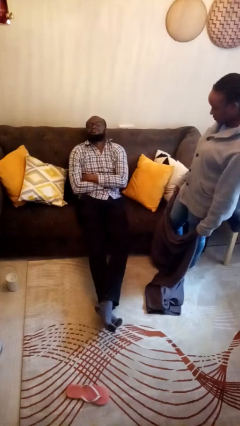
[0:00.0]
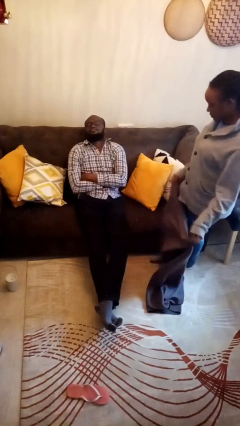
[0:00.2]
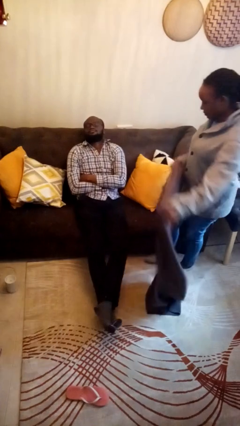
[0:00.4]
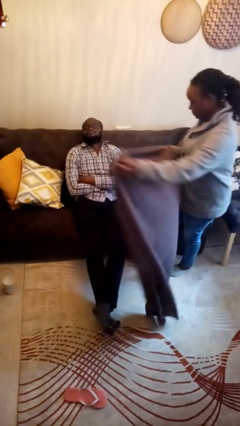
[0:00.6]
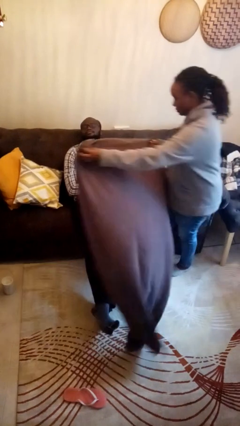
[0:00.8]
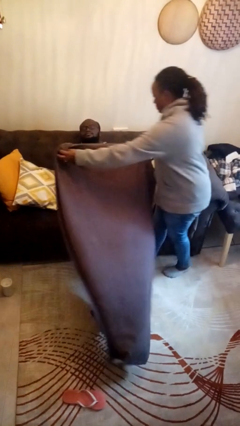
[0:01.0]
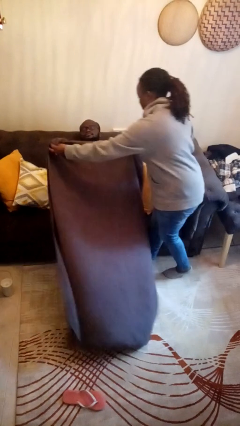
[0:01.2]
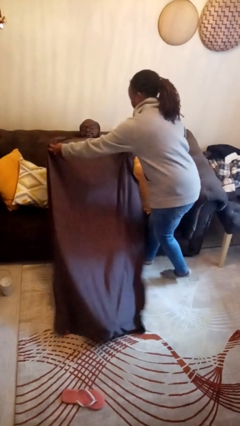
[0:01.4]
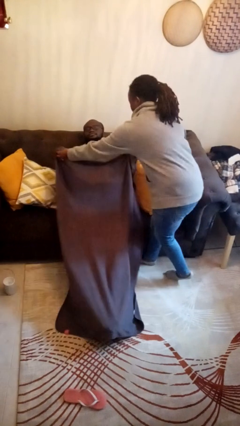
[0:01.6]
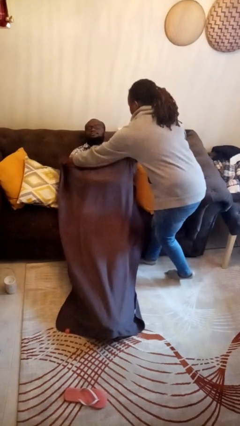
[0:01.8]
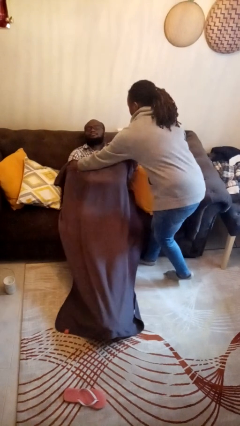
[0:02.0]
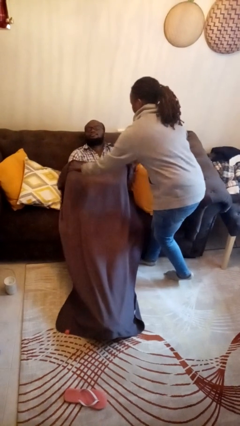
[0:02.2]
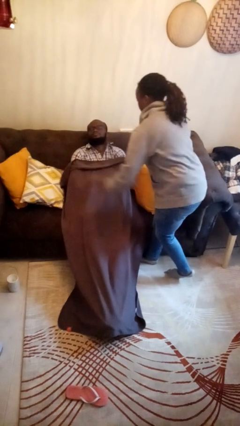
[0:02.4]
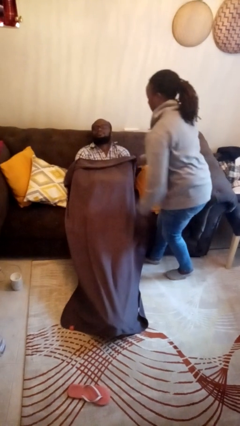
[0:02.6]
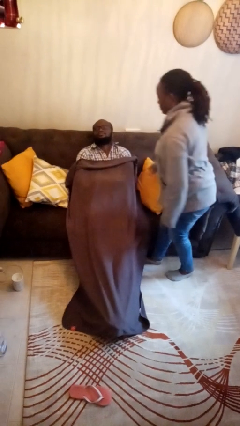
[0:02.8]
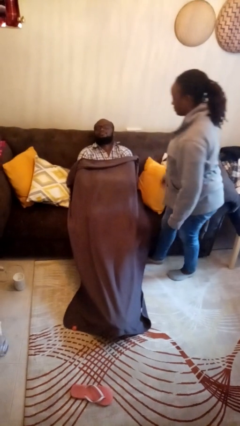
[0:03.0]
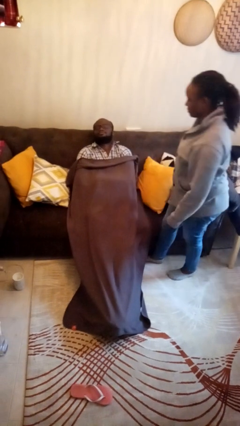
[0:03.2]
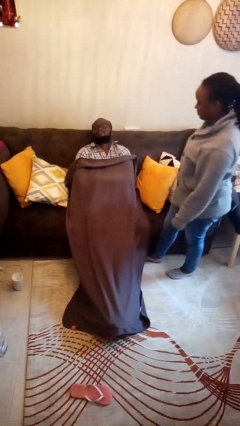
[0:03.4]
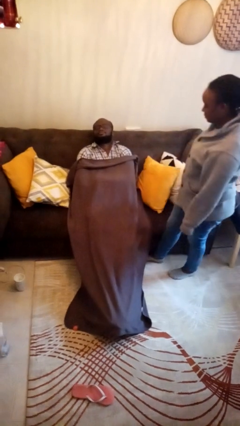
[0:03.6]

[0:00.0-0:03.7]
person covers friend with blanket

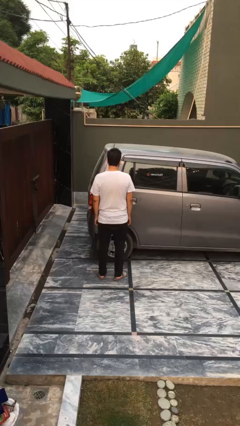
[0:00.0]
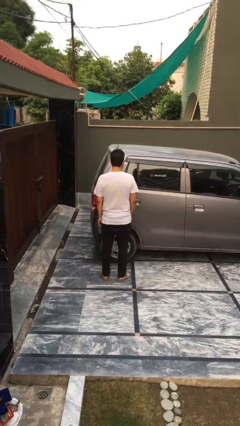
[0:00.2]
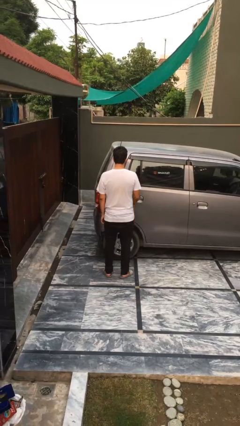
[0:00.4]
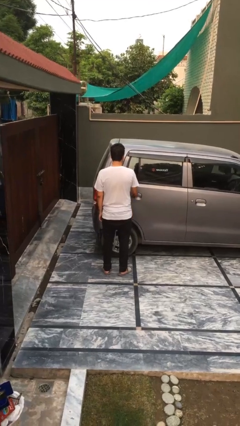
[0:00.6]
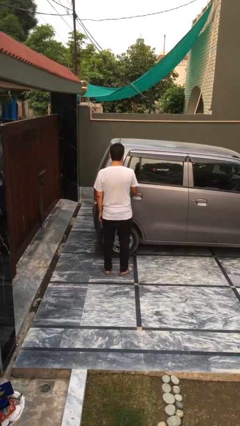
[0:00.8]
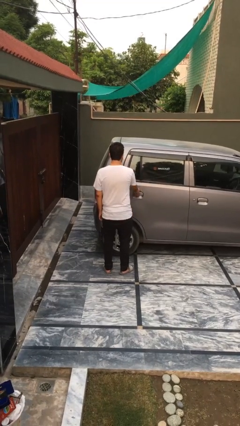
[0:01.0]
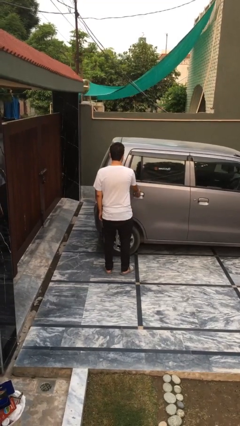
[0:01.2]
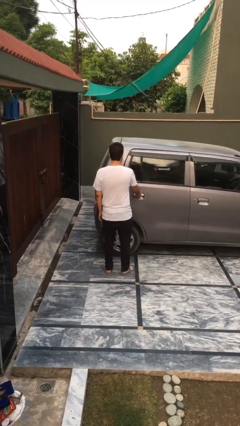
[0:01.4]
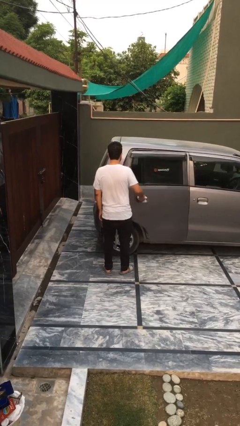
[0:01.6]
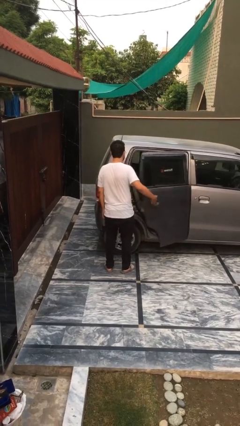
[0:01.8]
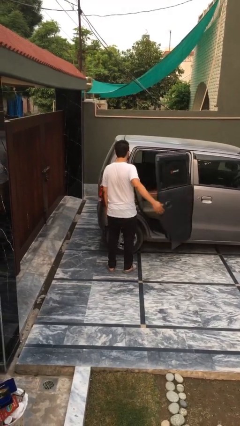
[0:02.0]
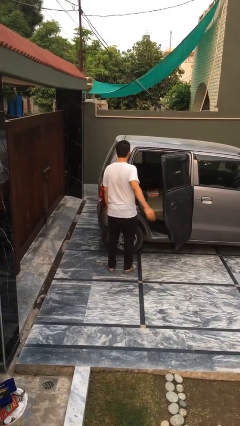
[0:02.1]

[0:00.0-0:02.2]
person opens car door

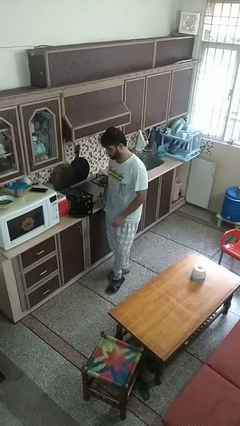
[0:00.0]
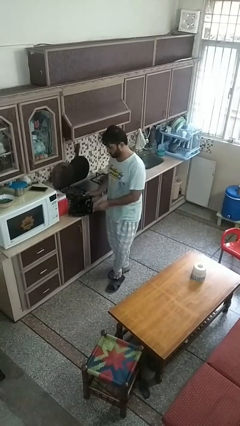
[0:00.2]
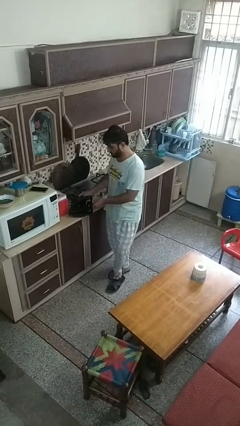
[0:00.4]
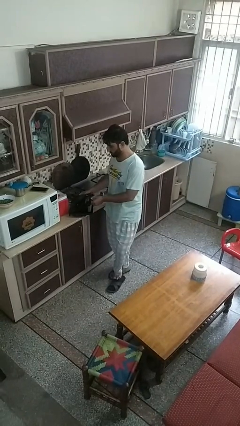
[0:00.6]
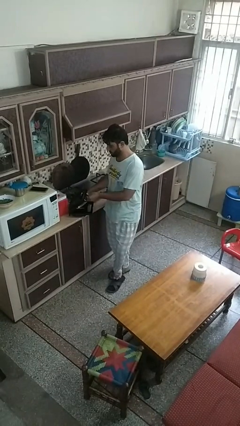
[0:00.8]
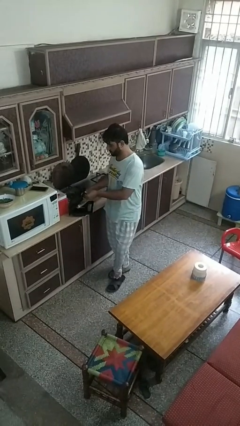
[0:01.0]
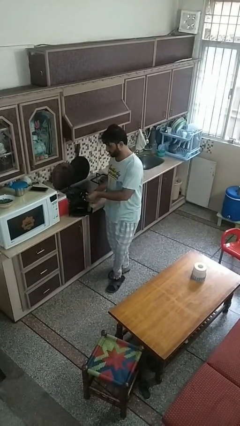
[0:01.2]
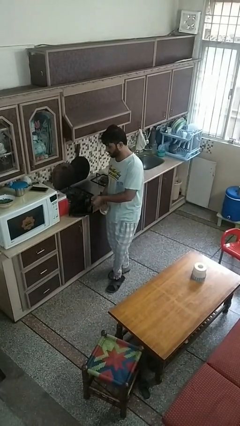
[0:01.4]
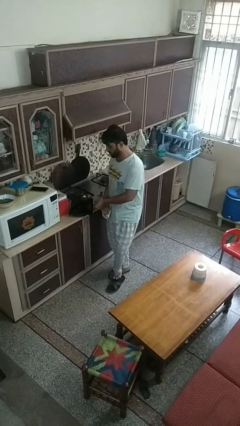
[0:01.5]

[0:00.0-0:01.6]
person takes object from toaster

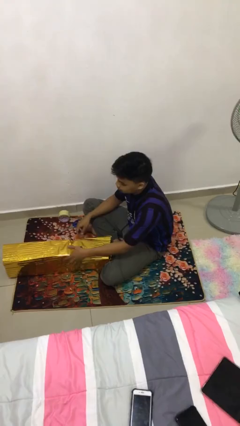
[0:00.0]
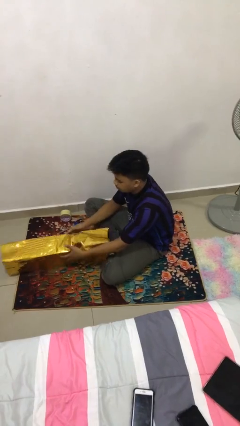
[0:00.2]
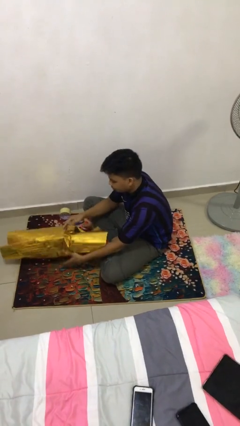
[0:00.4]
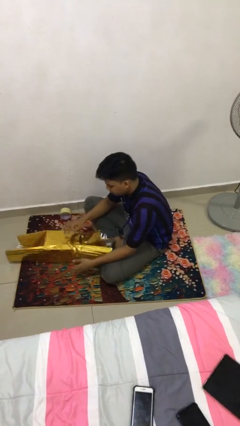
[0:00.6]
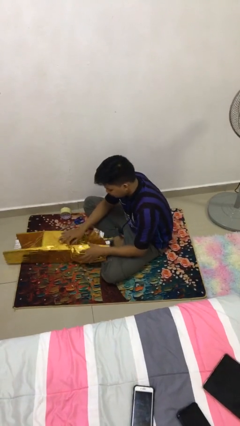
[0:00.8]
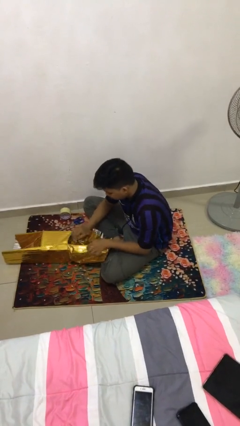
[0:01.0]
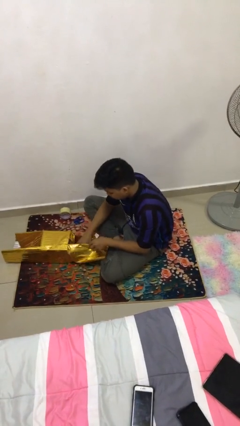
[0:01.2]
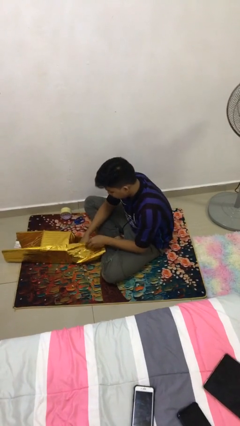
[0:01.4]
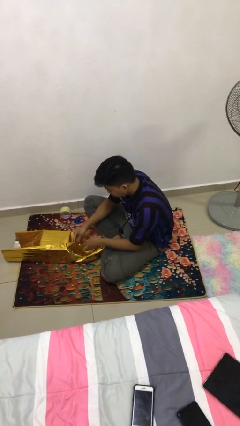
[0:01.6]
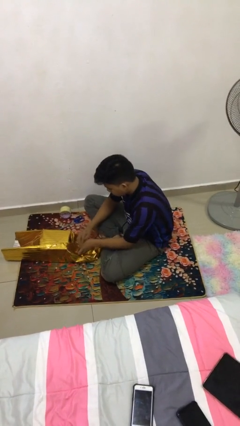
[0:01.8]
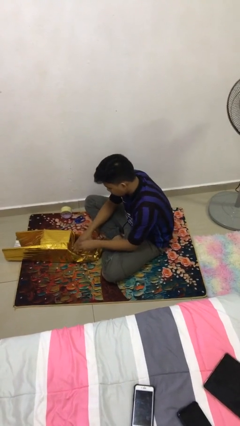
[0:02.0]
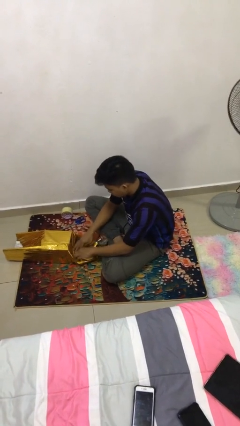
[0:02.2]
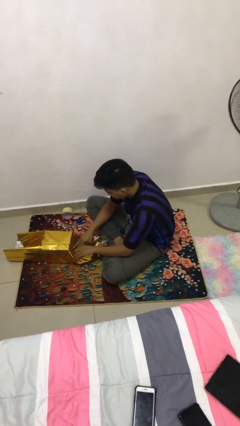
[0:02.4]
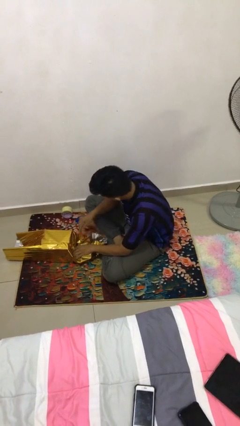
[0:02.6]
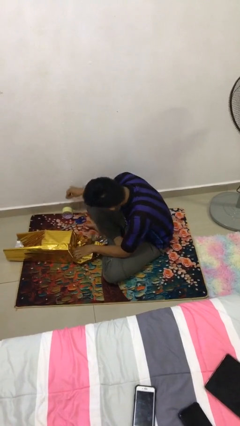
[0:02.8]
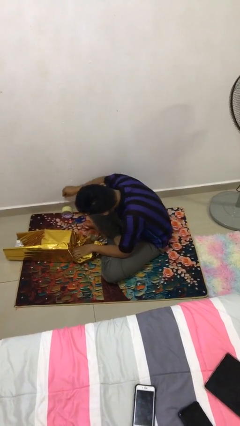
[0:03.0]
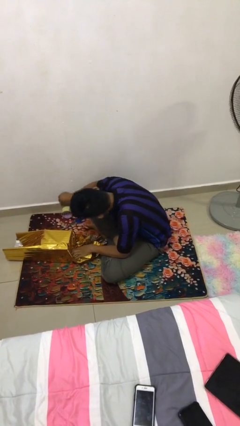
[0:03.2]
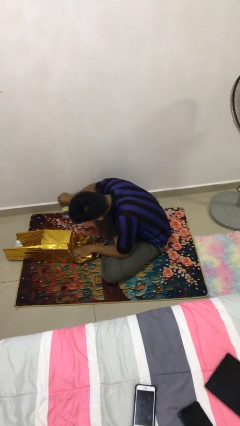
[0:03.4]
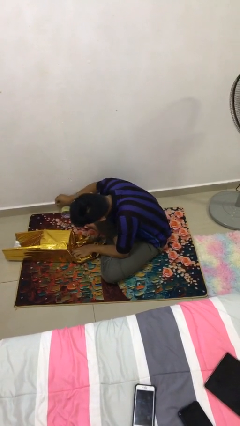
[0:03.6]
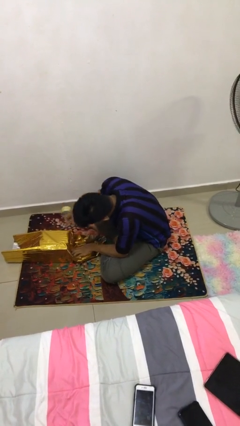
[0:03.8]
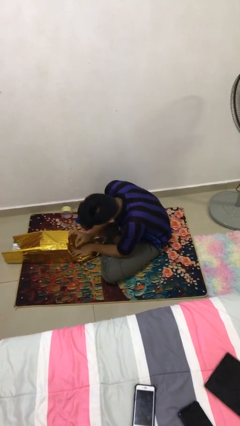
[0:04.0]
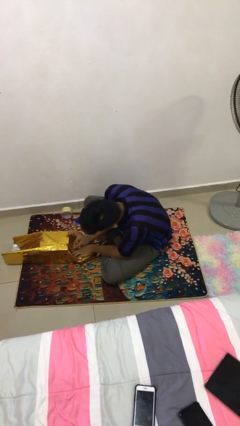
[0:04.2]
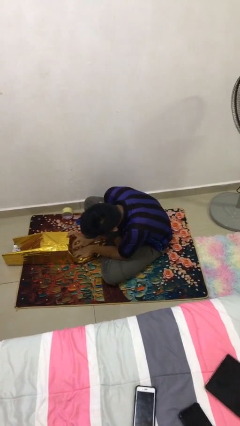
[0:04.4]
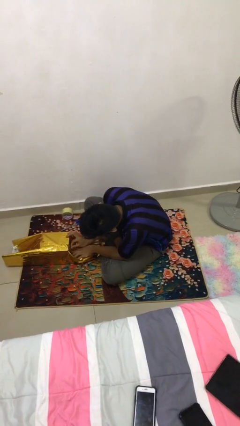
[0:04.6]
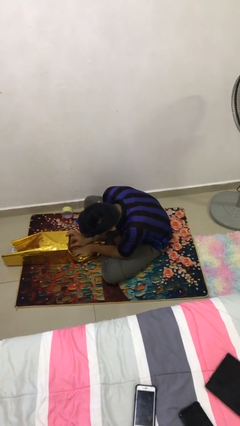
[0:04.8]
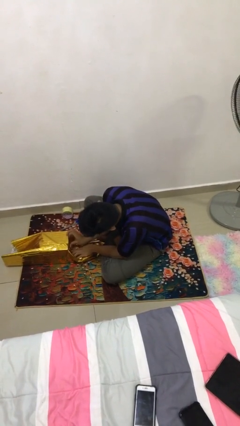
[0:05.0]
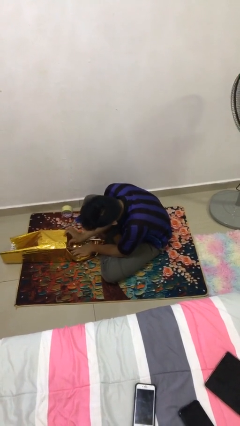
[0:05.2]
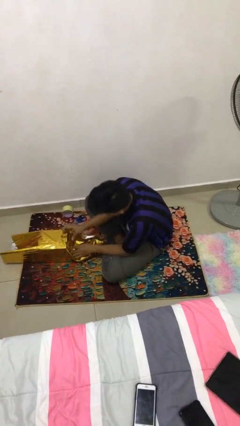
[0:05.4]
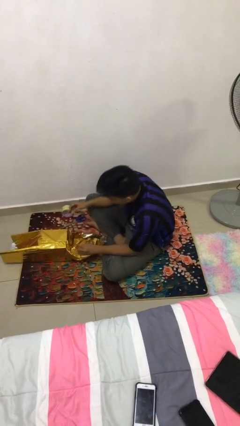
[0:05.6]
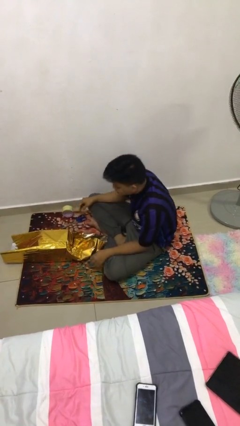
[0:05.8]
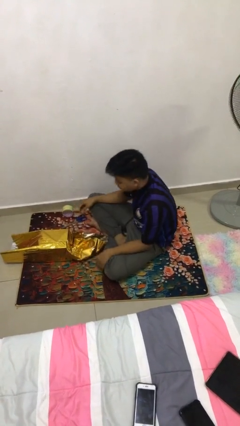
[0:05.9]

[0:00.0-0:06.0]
person wraps box

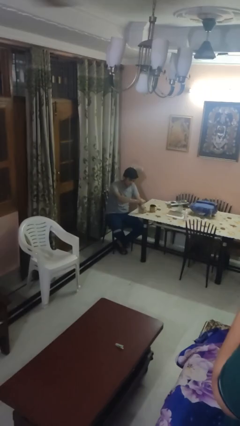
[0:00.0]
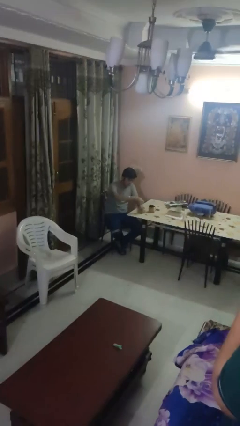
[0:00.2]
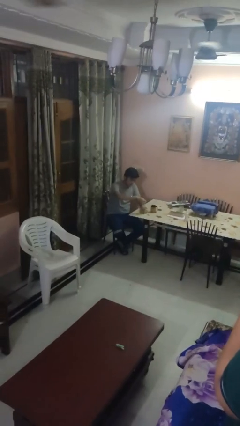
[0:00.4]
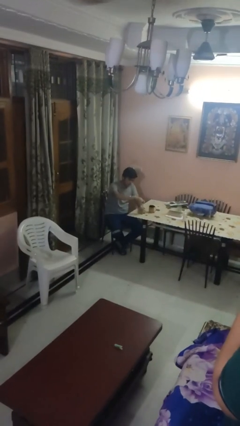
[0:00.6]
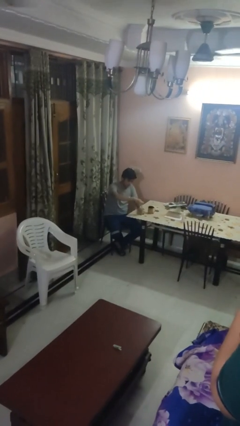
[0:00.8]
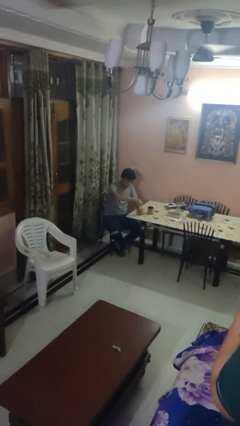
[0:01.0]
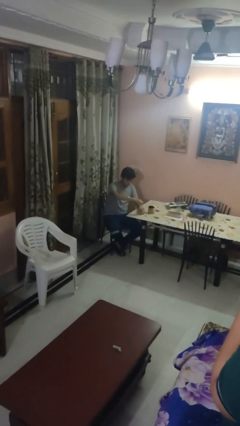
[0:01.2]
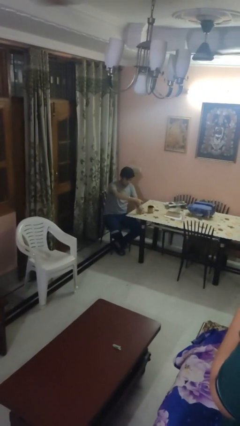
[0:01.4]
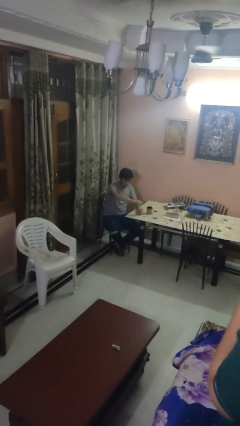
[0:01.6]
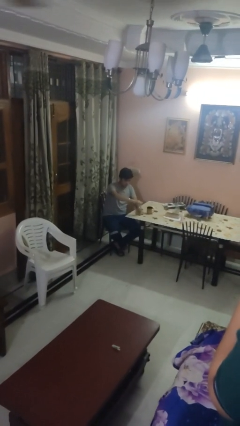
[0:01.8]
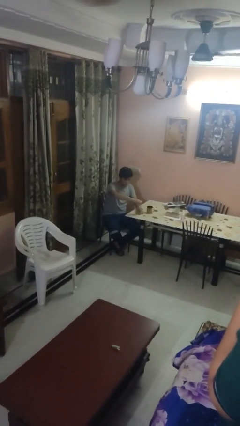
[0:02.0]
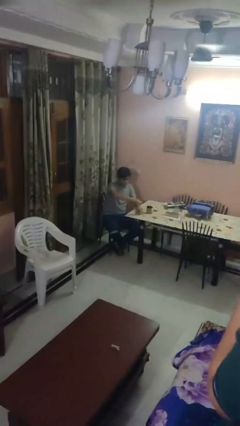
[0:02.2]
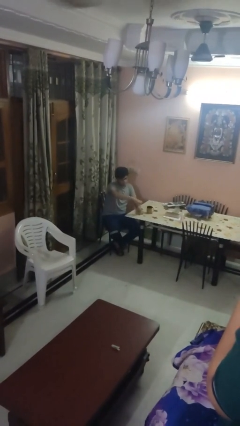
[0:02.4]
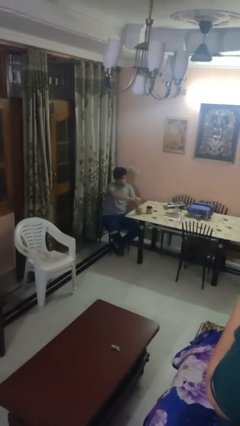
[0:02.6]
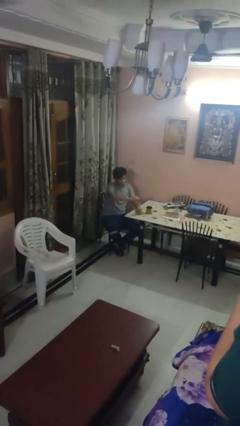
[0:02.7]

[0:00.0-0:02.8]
person unscrews lid from bottle

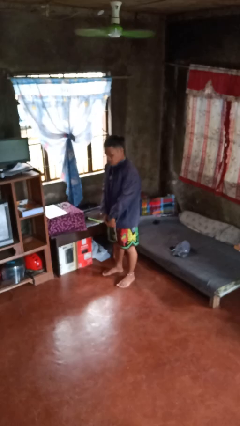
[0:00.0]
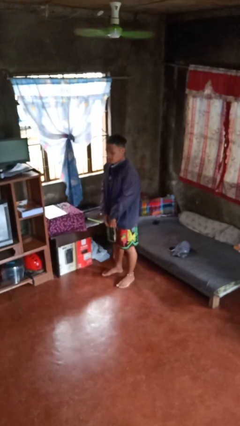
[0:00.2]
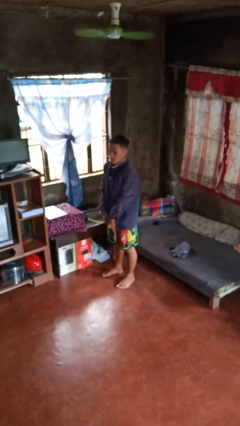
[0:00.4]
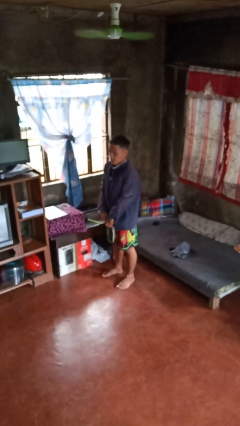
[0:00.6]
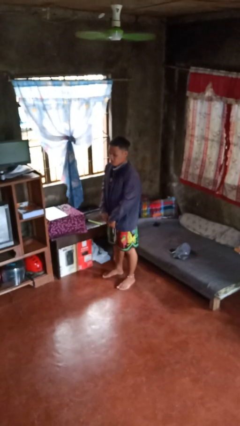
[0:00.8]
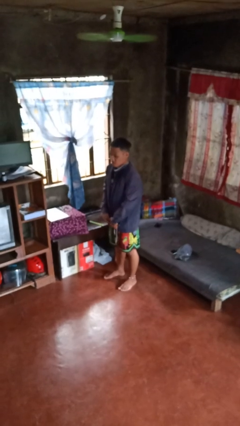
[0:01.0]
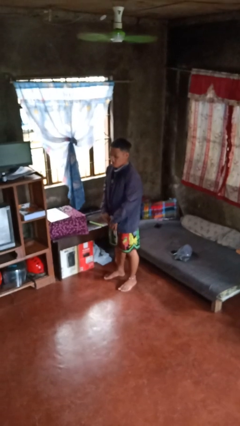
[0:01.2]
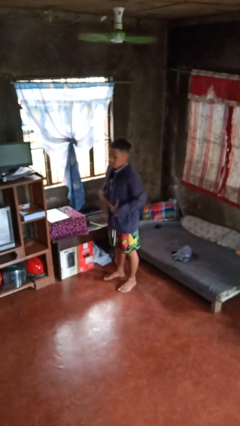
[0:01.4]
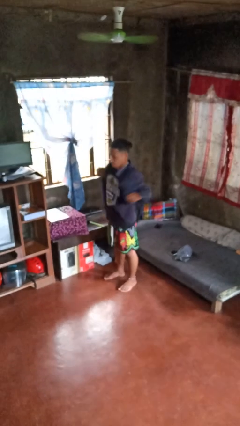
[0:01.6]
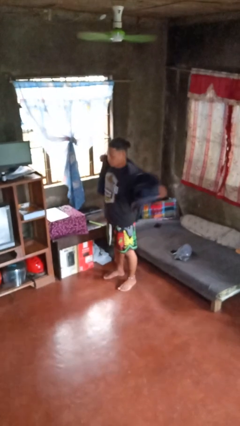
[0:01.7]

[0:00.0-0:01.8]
person unzips jacket
